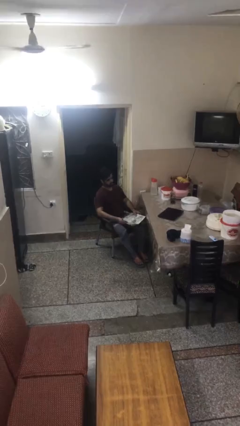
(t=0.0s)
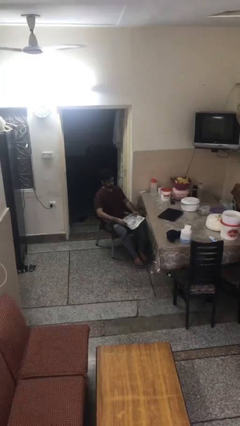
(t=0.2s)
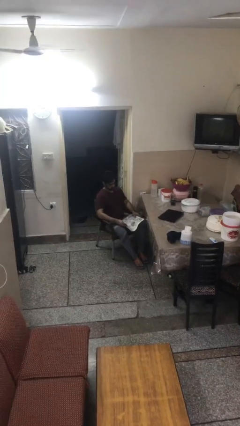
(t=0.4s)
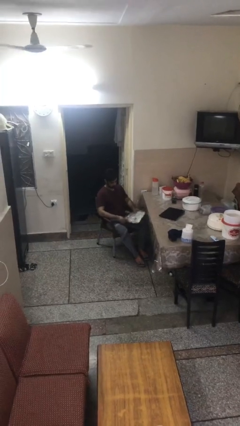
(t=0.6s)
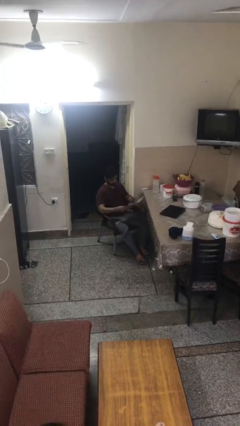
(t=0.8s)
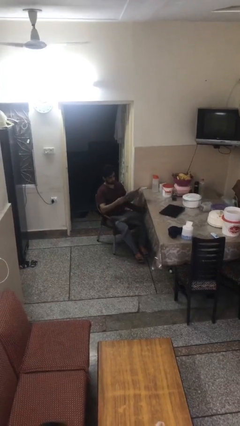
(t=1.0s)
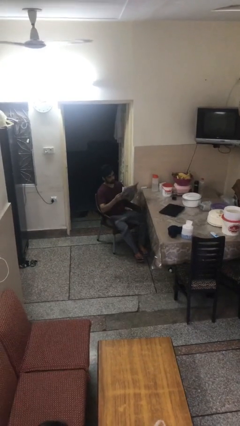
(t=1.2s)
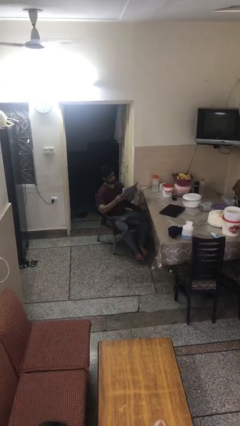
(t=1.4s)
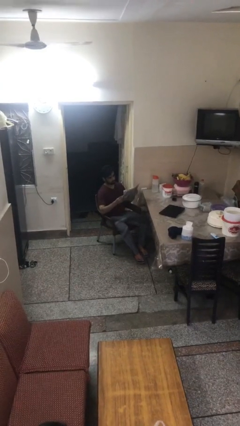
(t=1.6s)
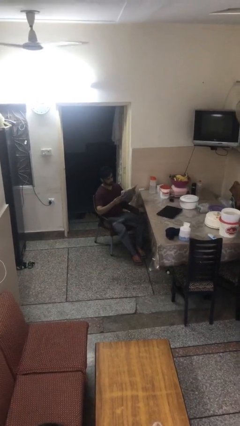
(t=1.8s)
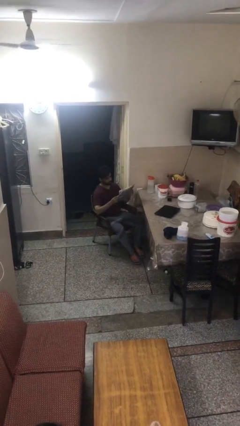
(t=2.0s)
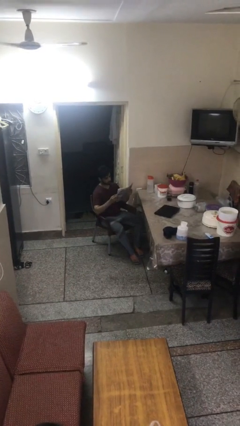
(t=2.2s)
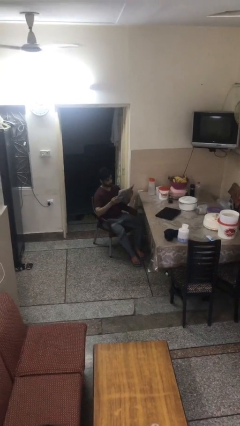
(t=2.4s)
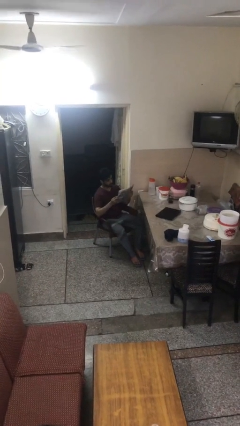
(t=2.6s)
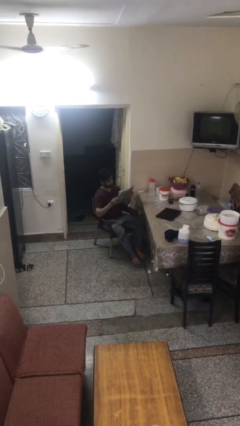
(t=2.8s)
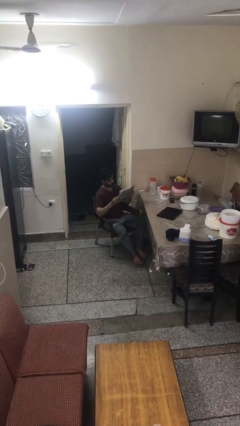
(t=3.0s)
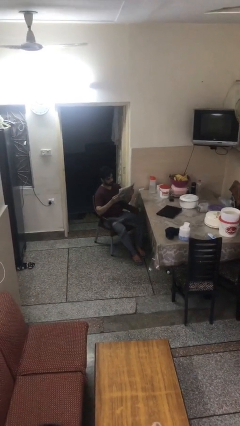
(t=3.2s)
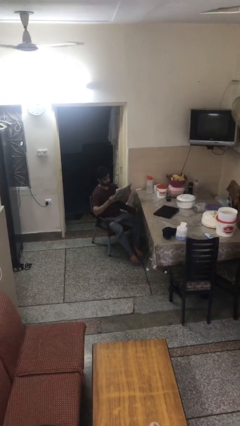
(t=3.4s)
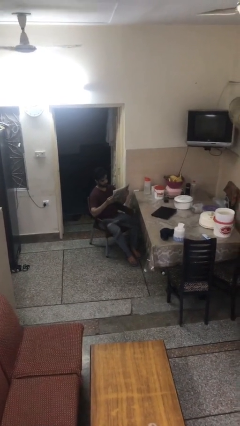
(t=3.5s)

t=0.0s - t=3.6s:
person reads document

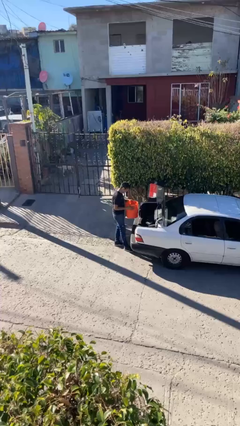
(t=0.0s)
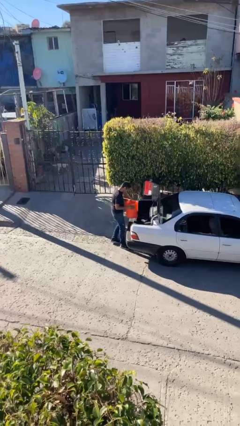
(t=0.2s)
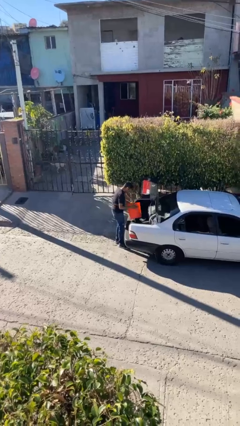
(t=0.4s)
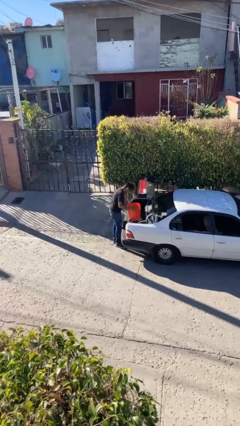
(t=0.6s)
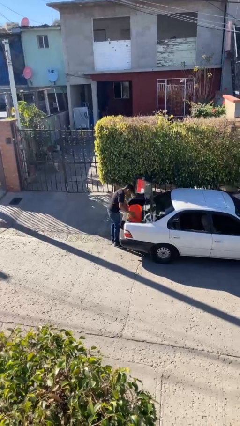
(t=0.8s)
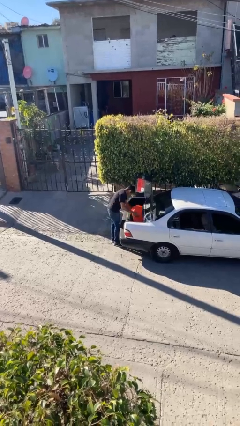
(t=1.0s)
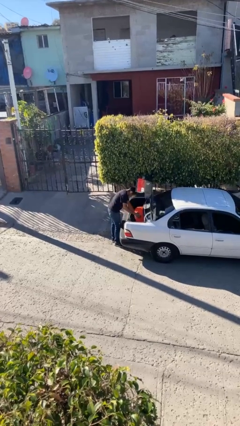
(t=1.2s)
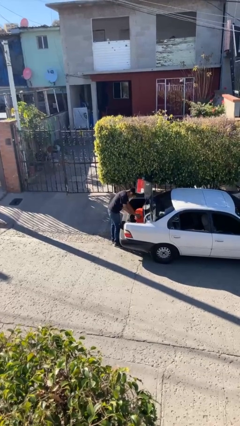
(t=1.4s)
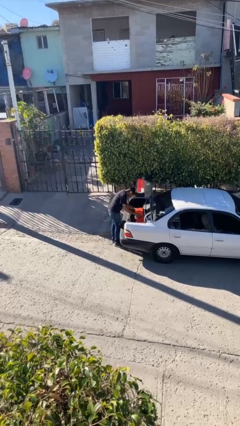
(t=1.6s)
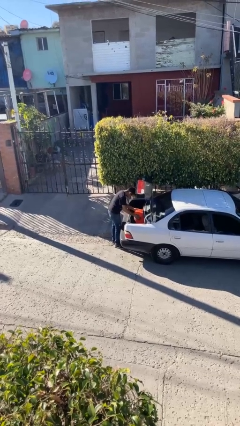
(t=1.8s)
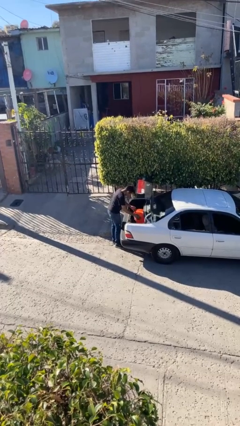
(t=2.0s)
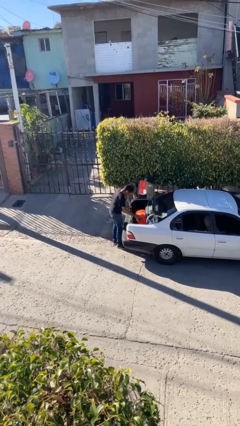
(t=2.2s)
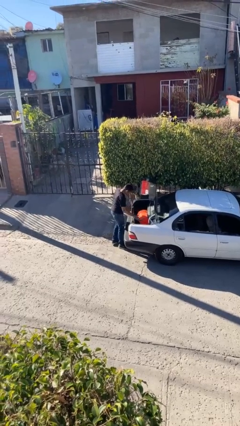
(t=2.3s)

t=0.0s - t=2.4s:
person loads car

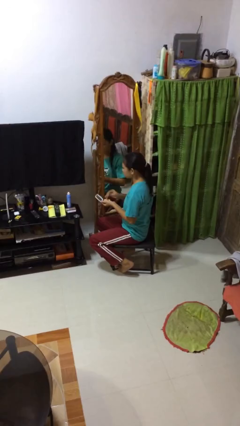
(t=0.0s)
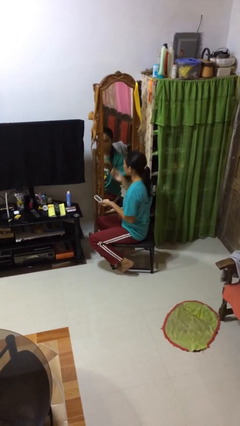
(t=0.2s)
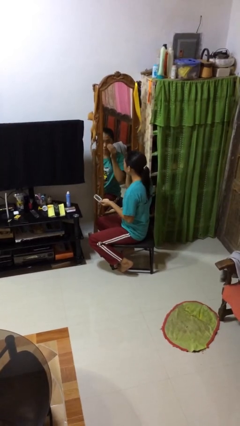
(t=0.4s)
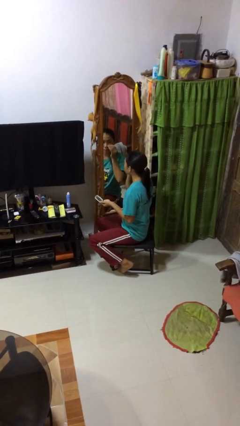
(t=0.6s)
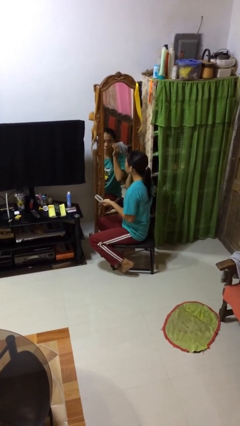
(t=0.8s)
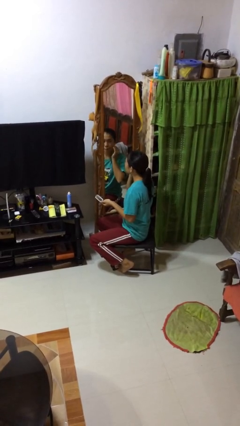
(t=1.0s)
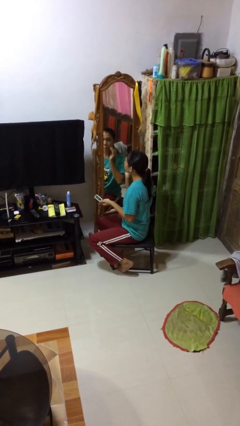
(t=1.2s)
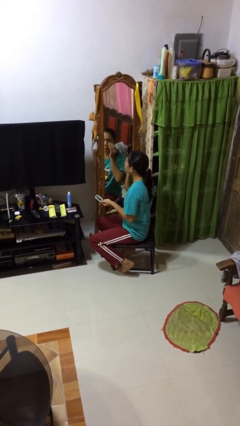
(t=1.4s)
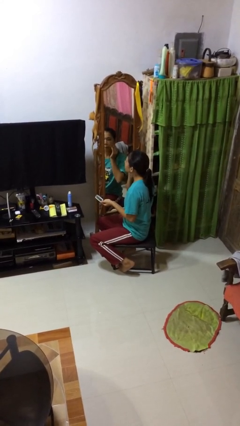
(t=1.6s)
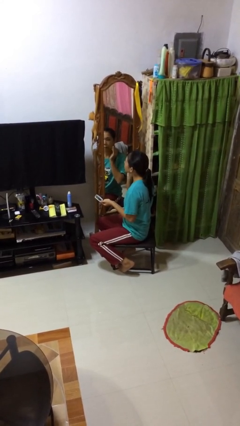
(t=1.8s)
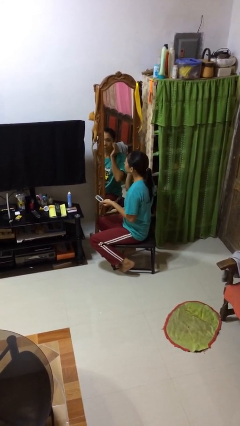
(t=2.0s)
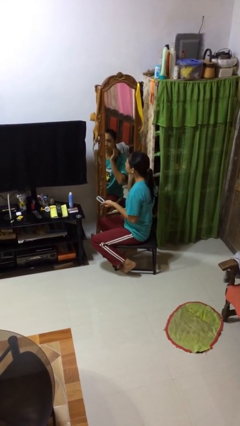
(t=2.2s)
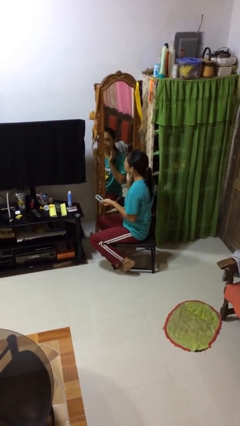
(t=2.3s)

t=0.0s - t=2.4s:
person applies foundation makeup

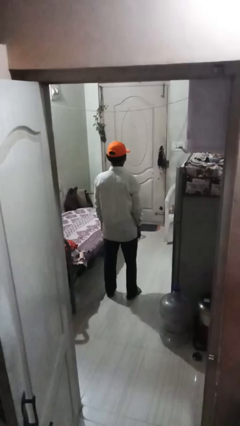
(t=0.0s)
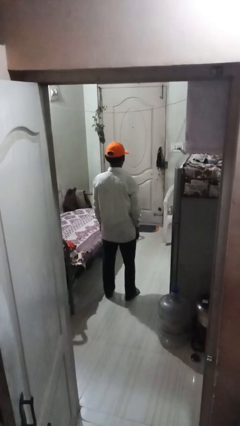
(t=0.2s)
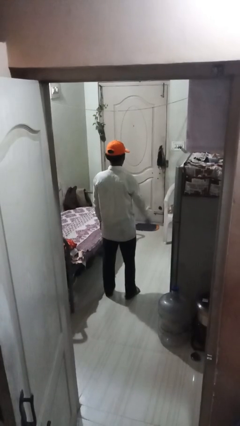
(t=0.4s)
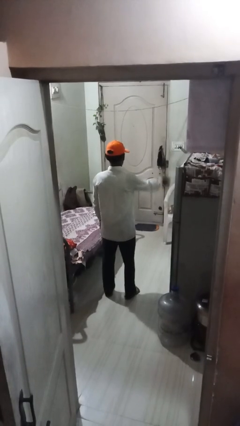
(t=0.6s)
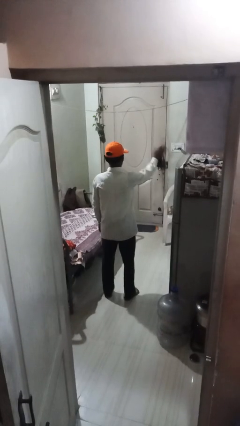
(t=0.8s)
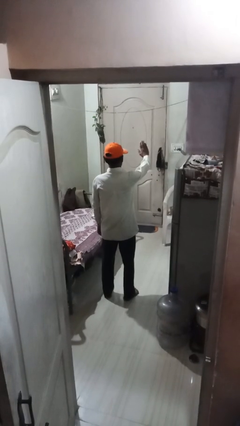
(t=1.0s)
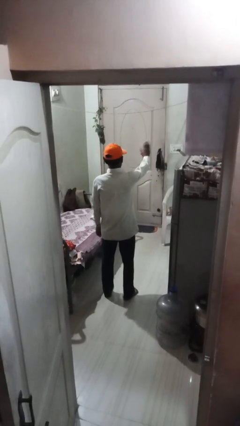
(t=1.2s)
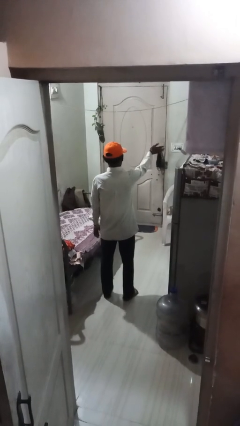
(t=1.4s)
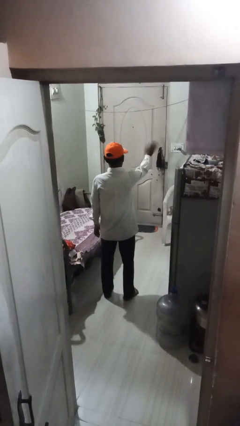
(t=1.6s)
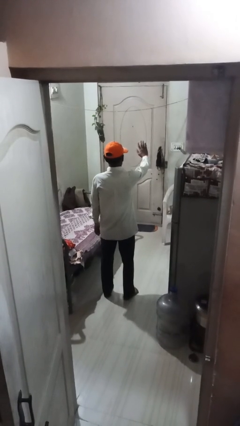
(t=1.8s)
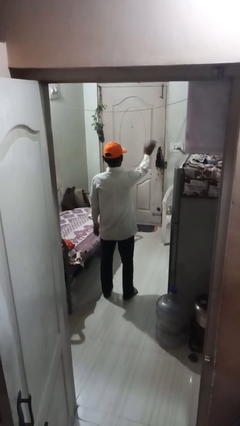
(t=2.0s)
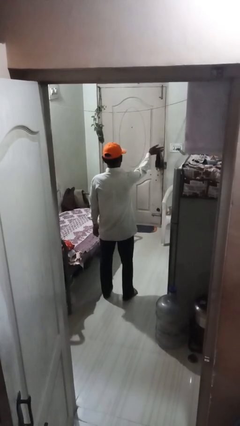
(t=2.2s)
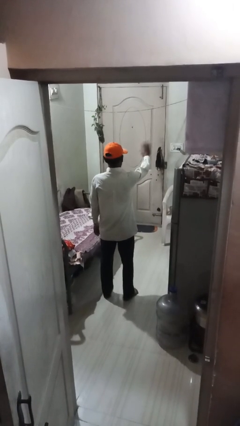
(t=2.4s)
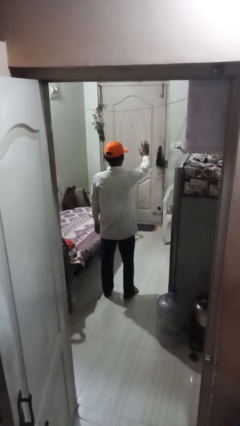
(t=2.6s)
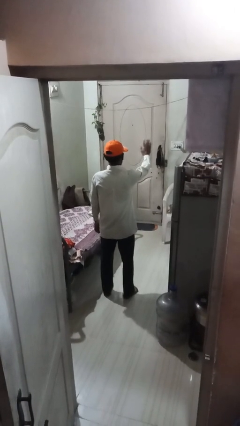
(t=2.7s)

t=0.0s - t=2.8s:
person waves at person

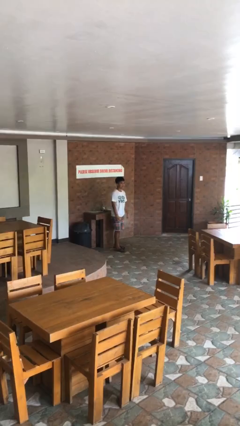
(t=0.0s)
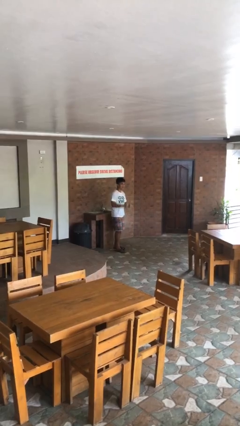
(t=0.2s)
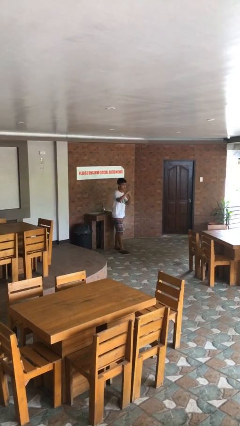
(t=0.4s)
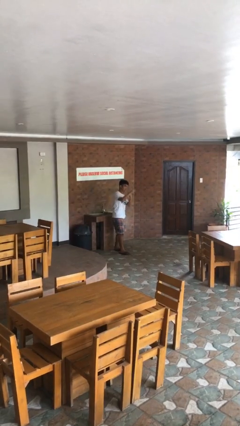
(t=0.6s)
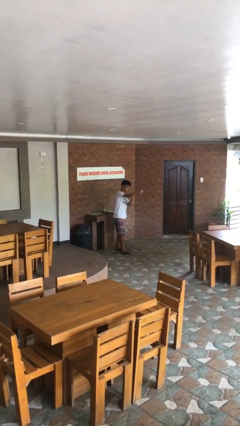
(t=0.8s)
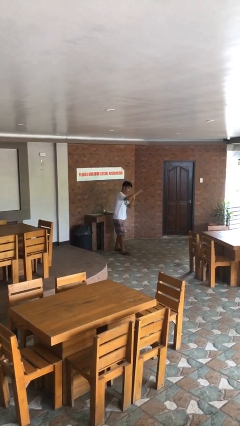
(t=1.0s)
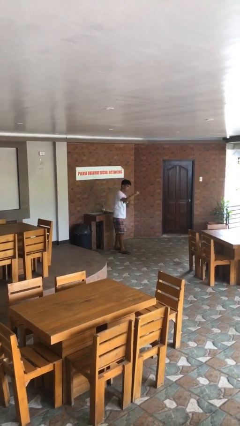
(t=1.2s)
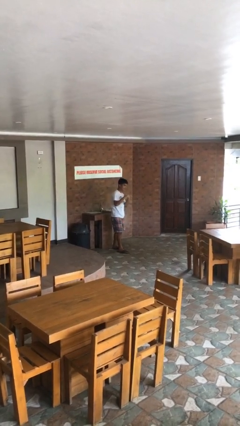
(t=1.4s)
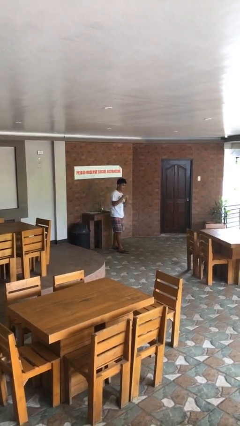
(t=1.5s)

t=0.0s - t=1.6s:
person punches

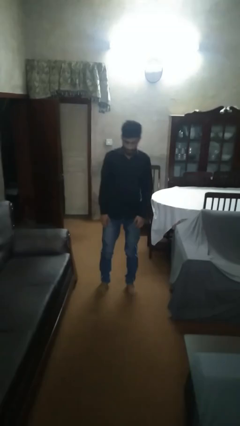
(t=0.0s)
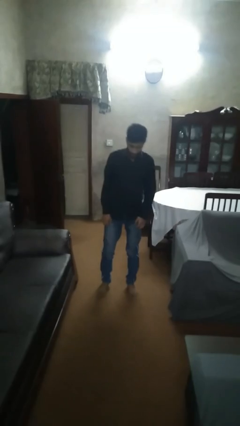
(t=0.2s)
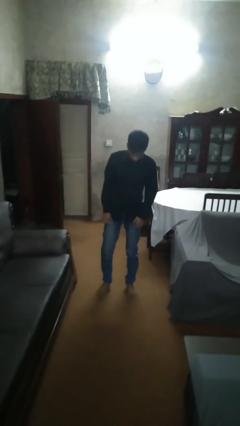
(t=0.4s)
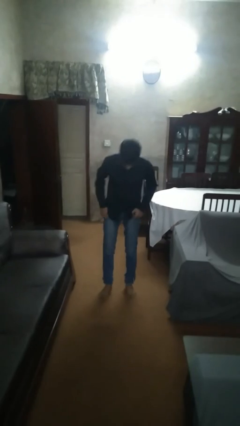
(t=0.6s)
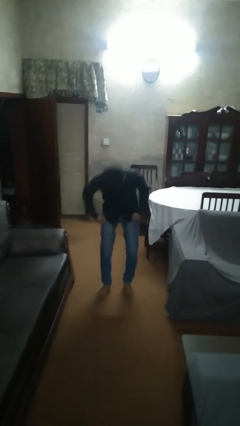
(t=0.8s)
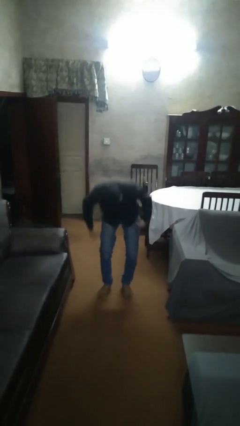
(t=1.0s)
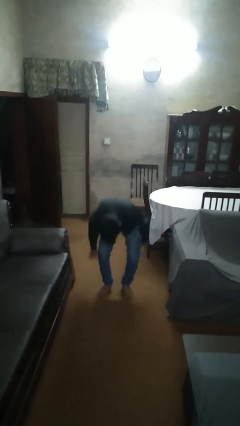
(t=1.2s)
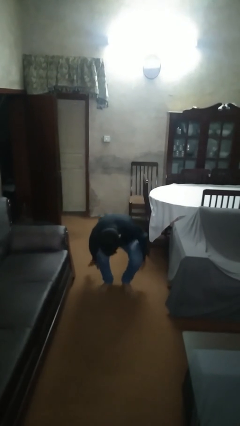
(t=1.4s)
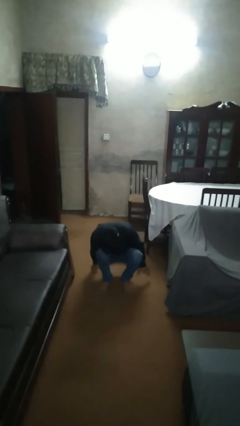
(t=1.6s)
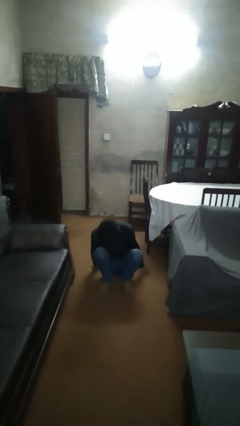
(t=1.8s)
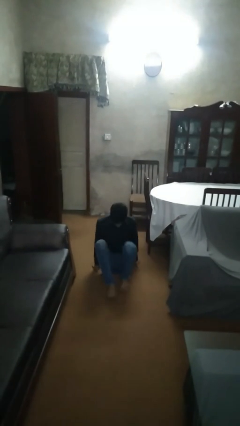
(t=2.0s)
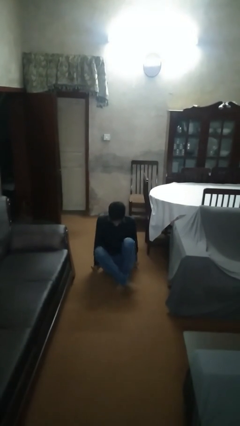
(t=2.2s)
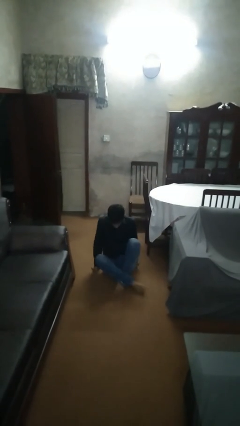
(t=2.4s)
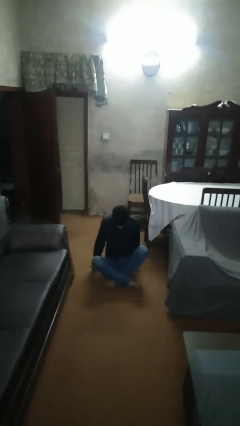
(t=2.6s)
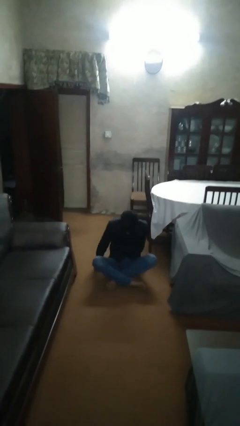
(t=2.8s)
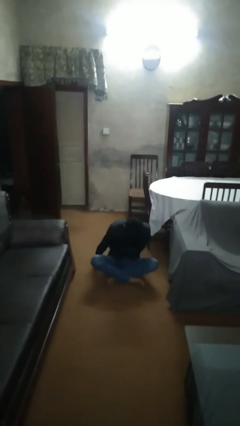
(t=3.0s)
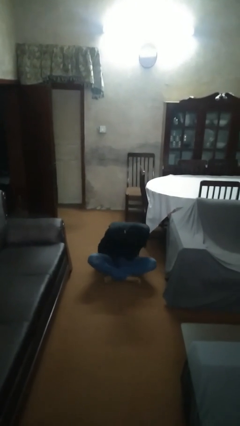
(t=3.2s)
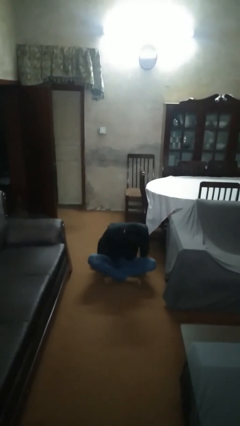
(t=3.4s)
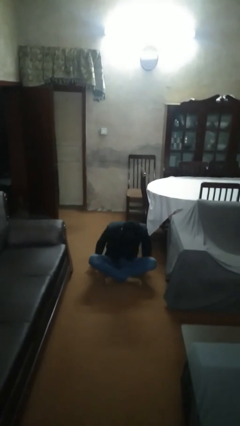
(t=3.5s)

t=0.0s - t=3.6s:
person sits crisscross

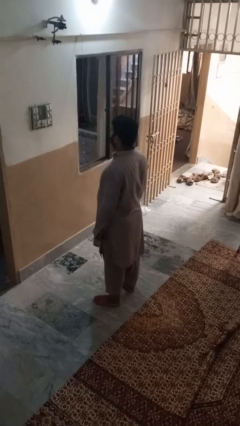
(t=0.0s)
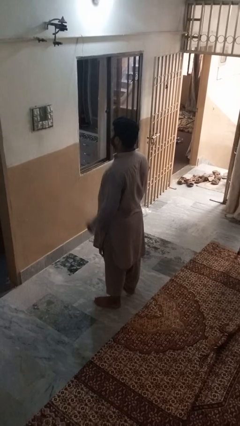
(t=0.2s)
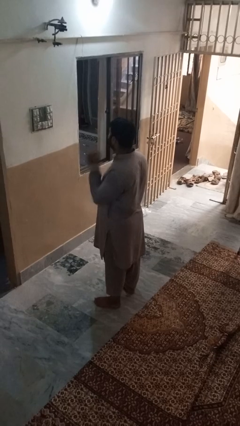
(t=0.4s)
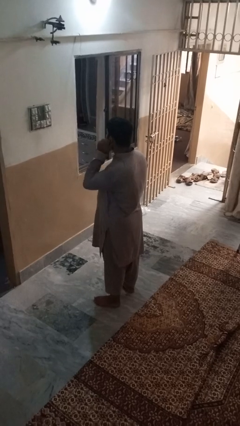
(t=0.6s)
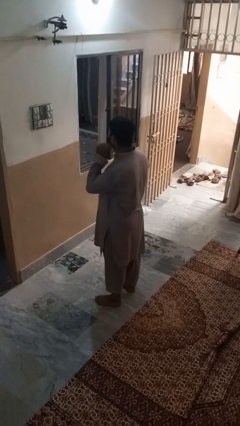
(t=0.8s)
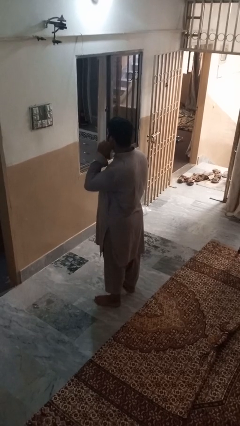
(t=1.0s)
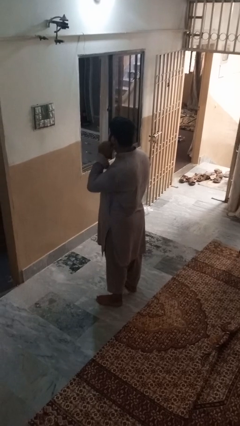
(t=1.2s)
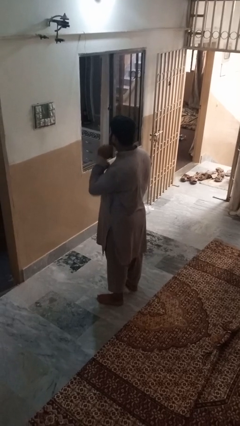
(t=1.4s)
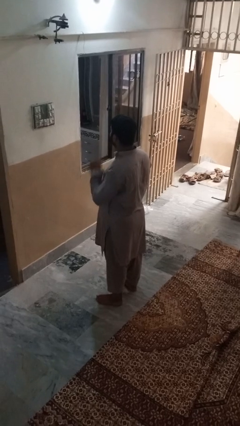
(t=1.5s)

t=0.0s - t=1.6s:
person touches earlobe
